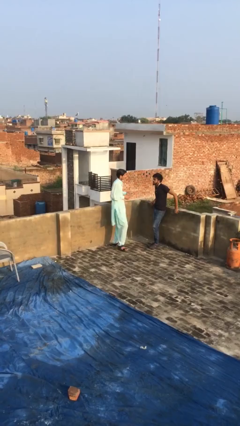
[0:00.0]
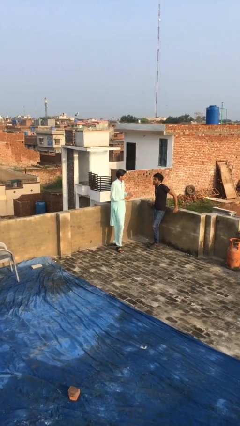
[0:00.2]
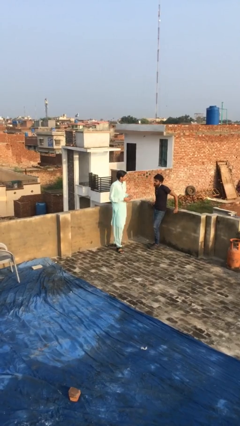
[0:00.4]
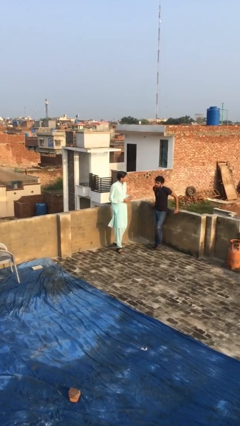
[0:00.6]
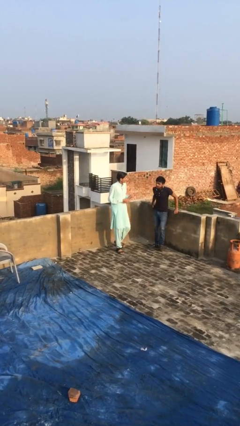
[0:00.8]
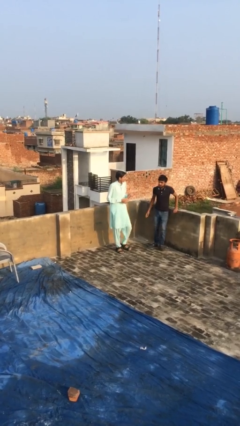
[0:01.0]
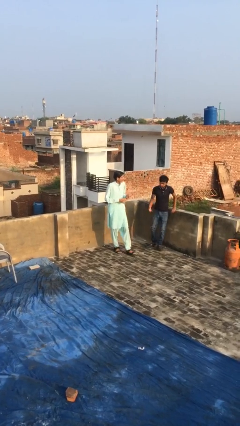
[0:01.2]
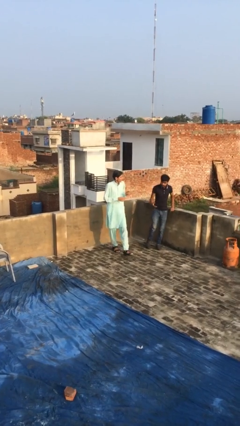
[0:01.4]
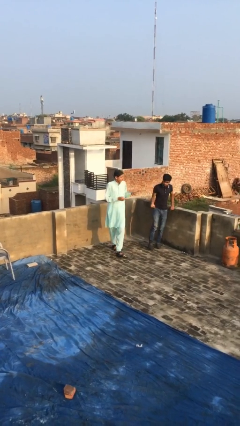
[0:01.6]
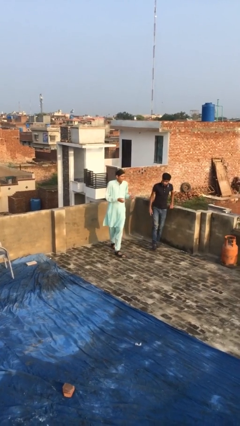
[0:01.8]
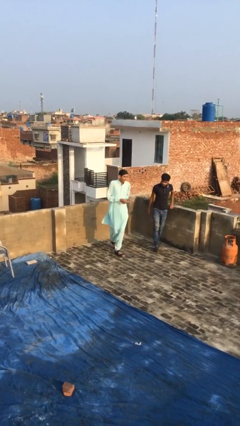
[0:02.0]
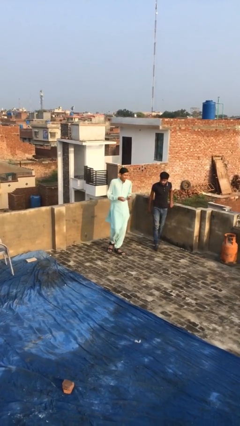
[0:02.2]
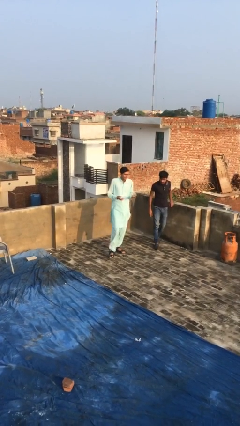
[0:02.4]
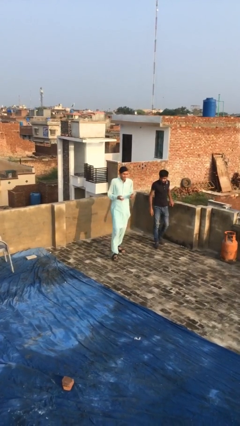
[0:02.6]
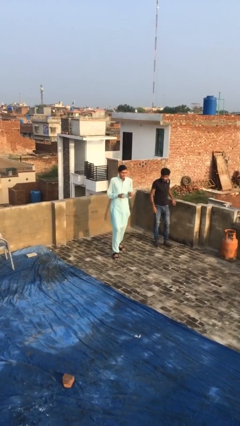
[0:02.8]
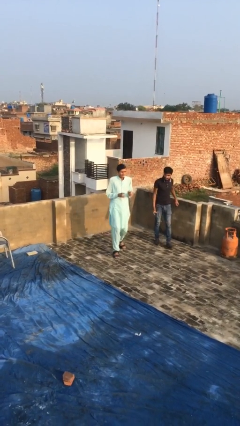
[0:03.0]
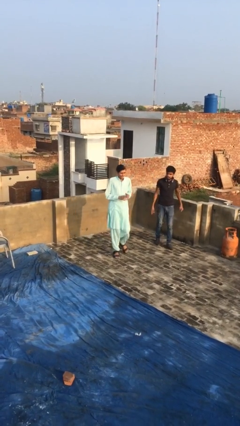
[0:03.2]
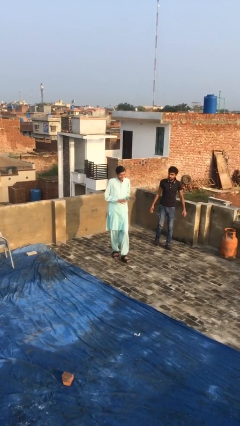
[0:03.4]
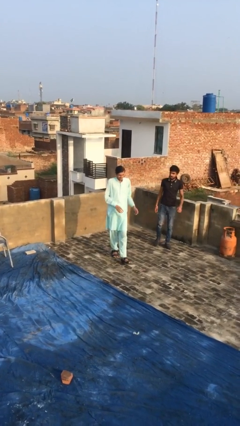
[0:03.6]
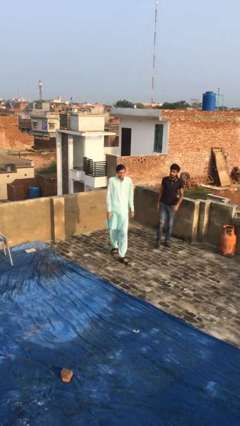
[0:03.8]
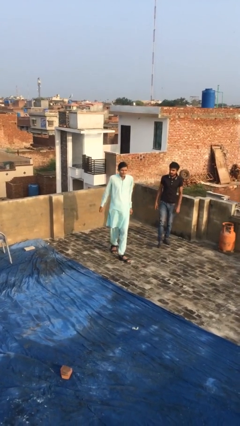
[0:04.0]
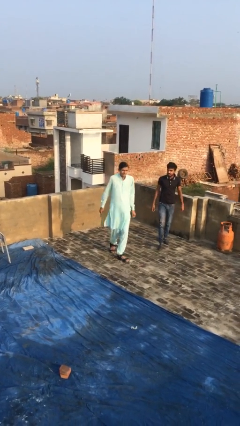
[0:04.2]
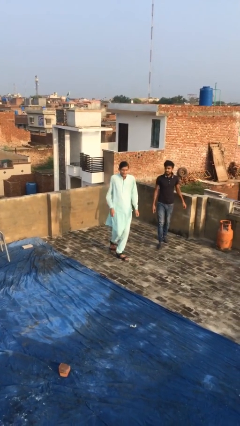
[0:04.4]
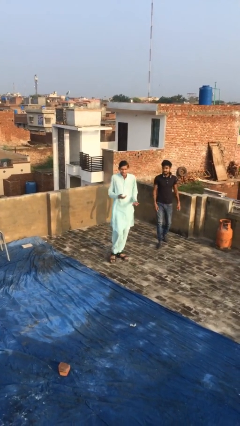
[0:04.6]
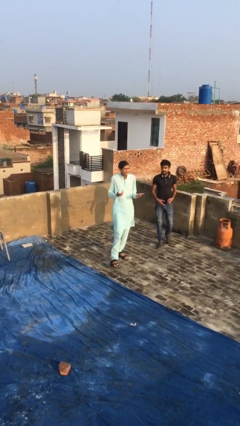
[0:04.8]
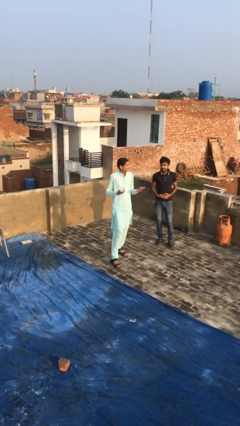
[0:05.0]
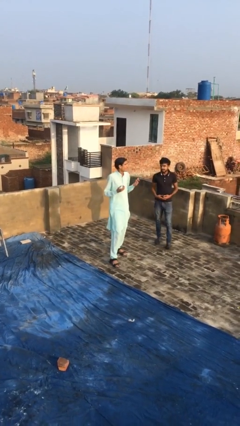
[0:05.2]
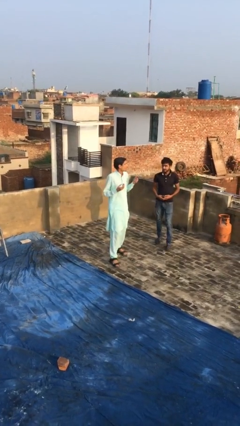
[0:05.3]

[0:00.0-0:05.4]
person talks to person

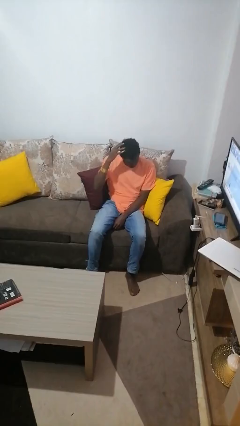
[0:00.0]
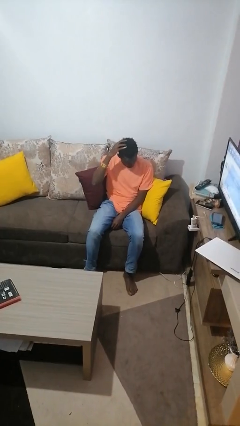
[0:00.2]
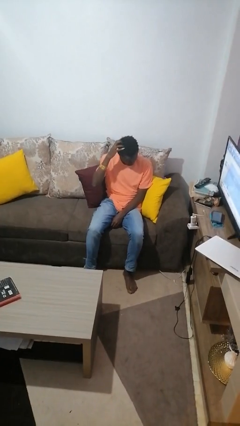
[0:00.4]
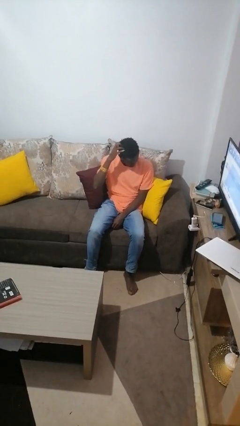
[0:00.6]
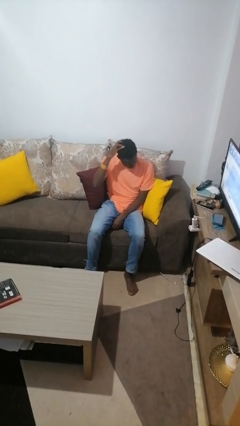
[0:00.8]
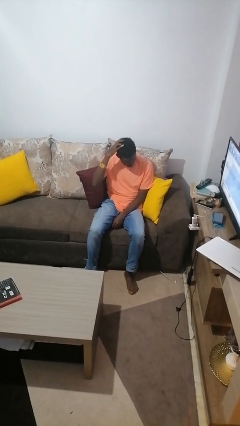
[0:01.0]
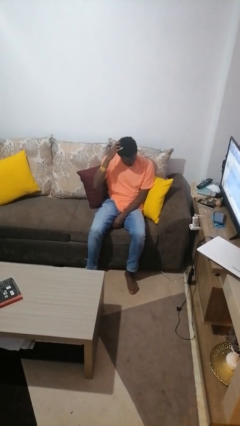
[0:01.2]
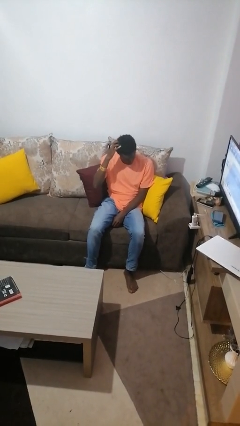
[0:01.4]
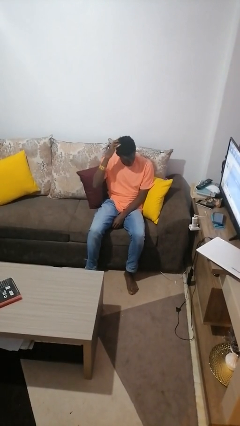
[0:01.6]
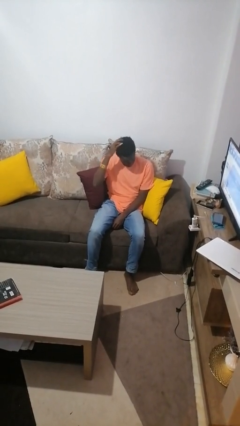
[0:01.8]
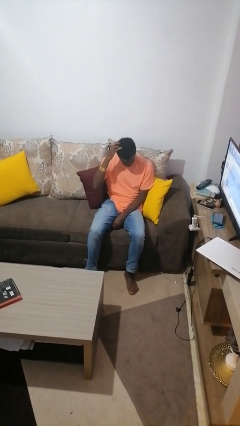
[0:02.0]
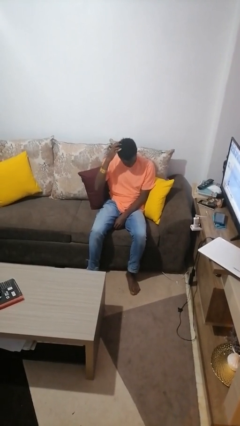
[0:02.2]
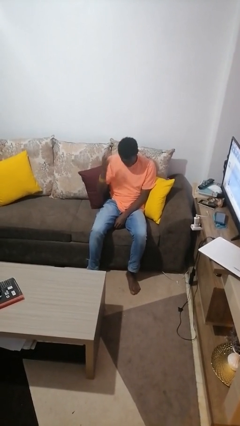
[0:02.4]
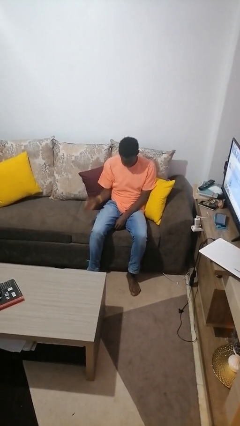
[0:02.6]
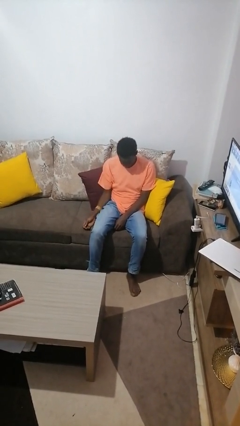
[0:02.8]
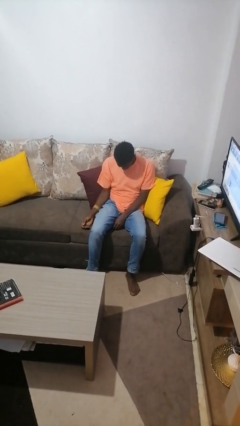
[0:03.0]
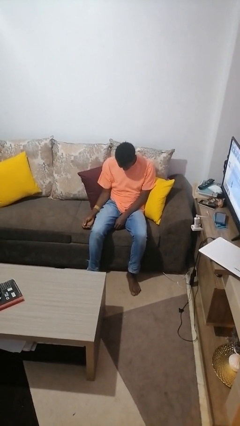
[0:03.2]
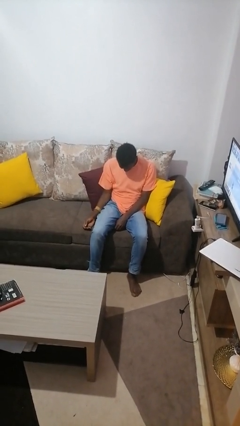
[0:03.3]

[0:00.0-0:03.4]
person strokes hair

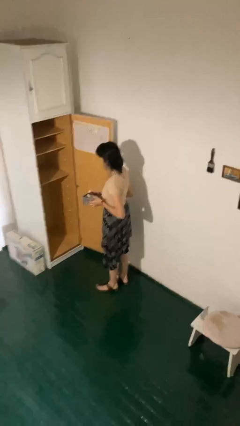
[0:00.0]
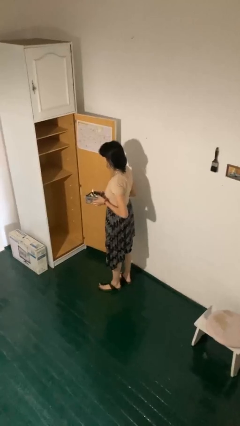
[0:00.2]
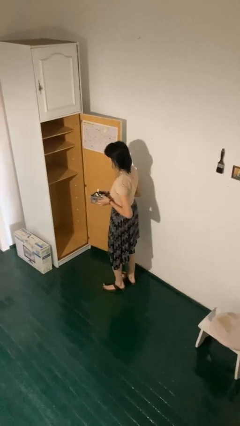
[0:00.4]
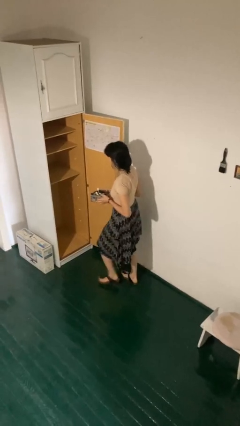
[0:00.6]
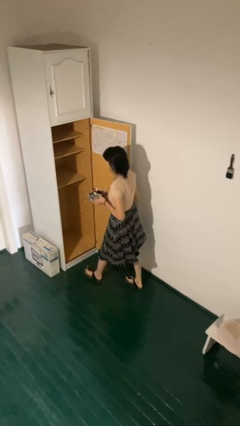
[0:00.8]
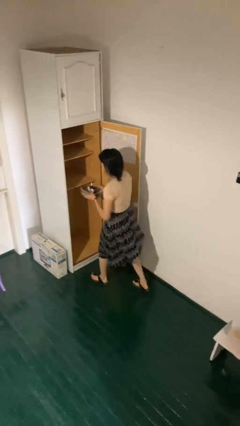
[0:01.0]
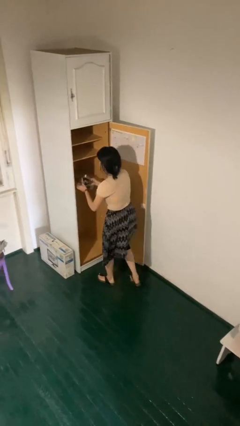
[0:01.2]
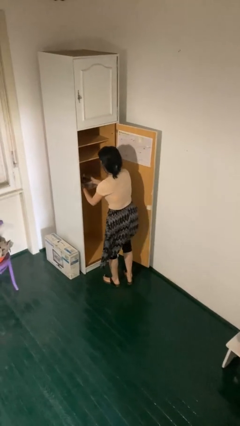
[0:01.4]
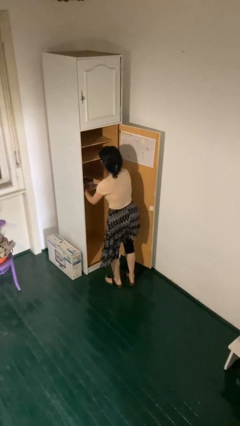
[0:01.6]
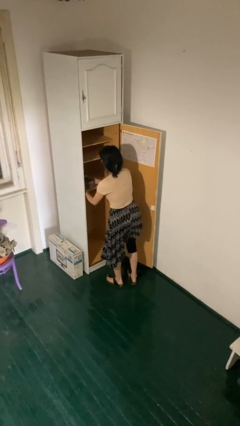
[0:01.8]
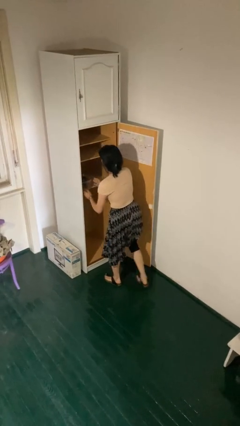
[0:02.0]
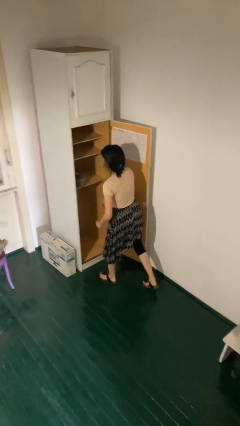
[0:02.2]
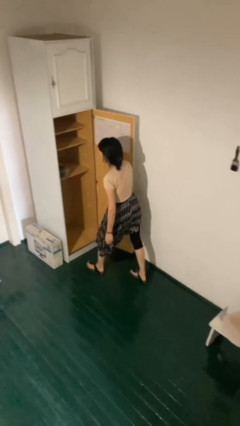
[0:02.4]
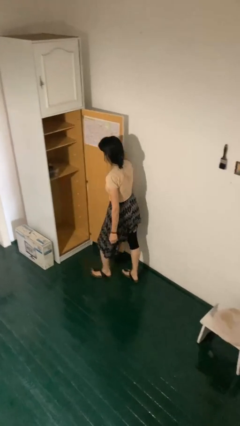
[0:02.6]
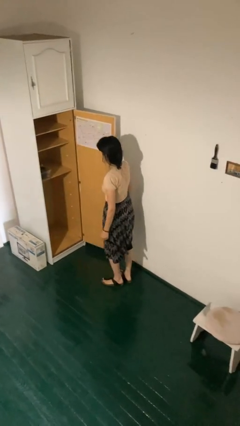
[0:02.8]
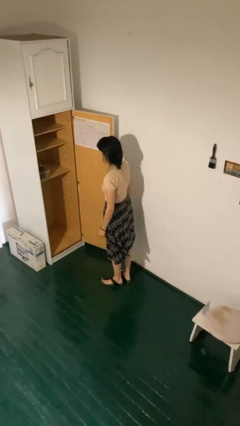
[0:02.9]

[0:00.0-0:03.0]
person puts down object into cabinet

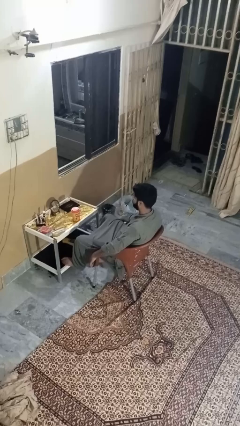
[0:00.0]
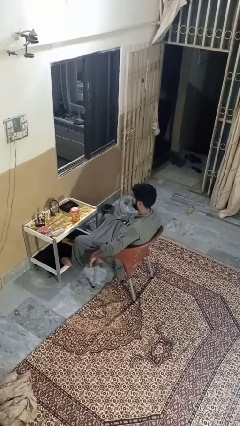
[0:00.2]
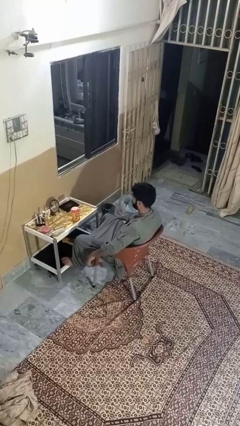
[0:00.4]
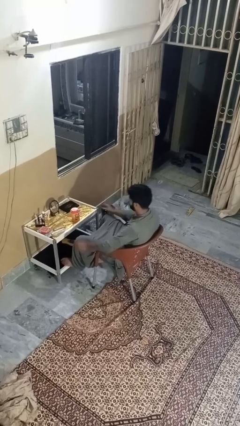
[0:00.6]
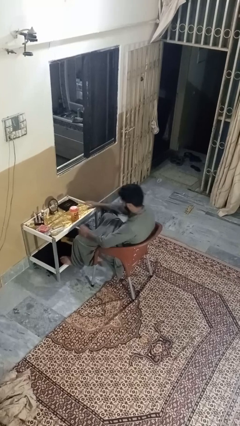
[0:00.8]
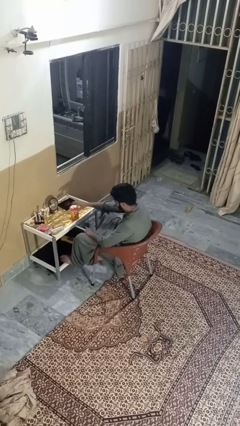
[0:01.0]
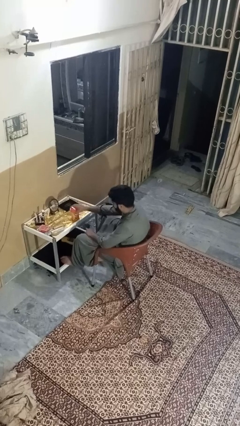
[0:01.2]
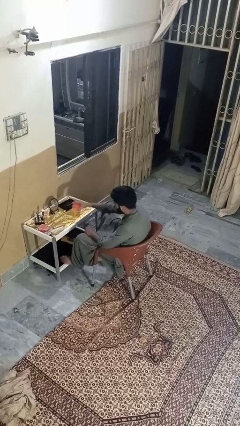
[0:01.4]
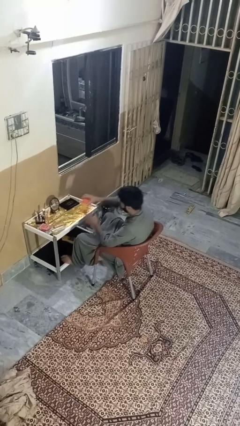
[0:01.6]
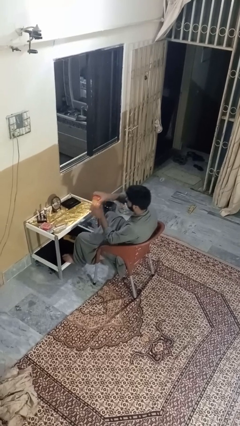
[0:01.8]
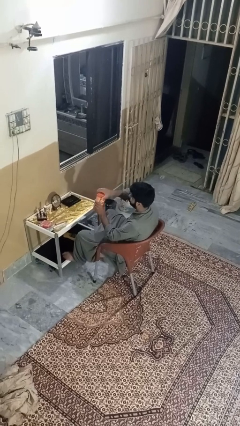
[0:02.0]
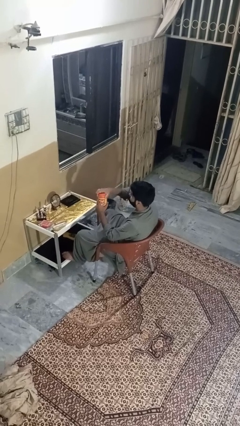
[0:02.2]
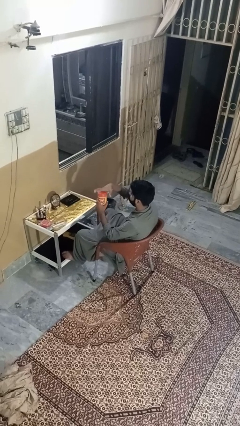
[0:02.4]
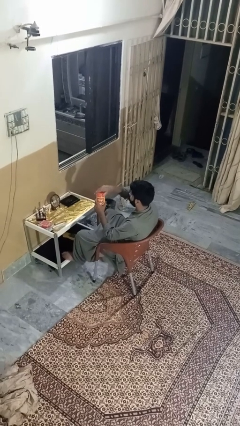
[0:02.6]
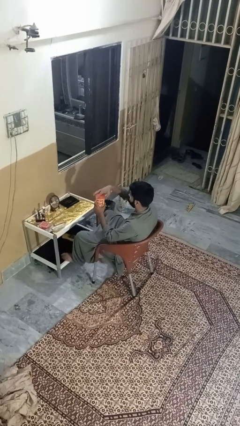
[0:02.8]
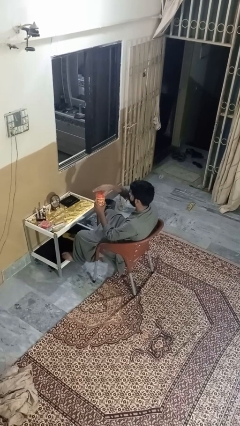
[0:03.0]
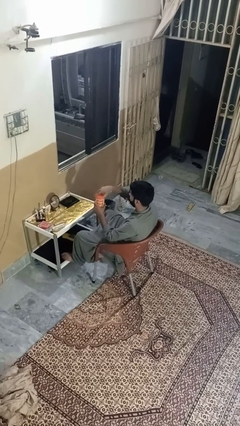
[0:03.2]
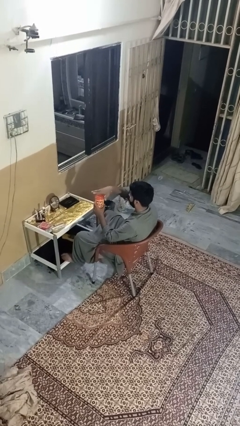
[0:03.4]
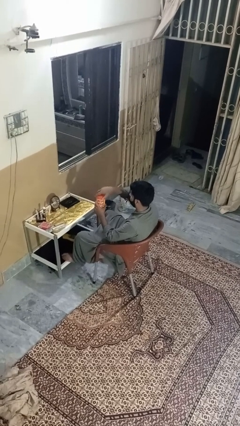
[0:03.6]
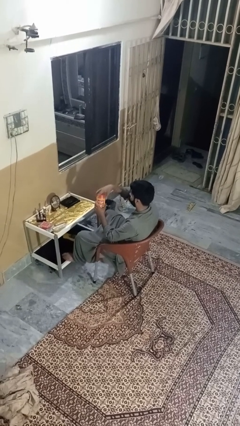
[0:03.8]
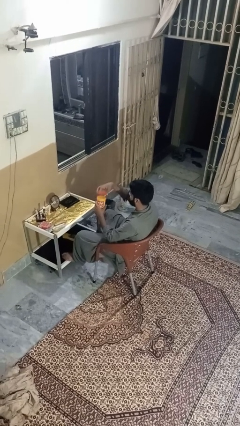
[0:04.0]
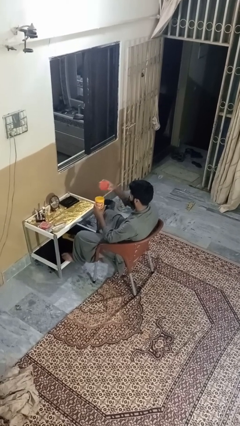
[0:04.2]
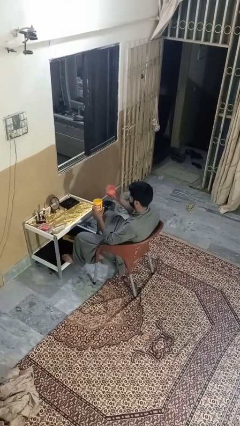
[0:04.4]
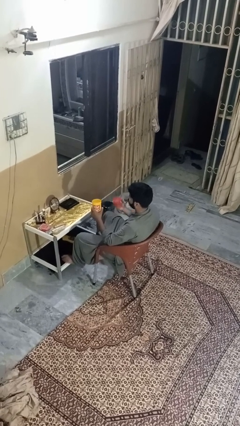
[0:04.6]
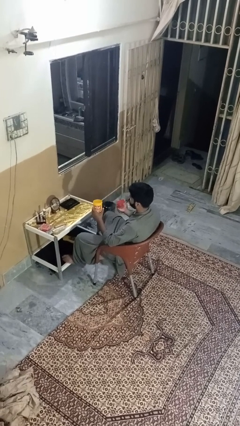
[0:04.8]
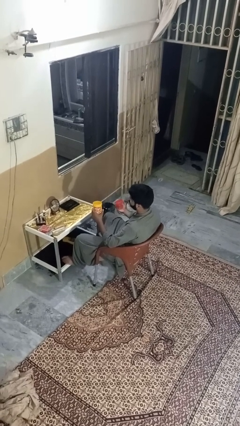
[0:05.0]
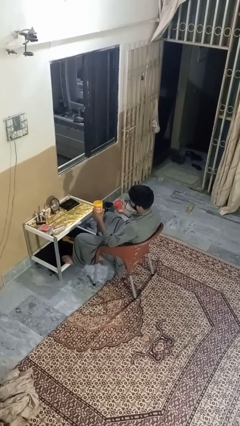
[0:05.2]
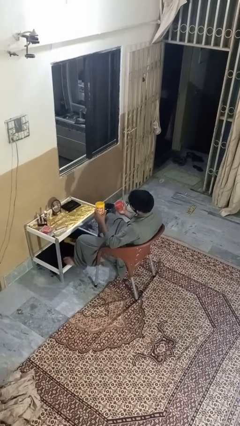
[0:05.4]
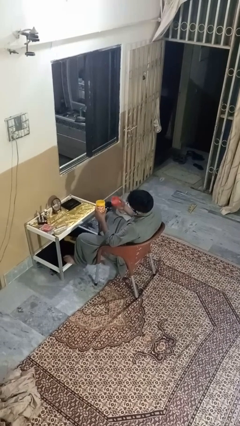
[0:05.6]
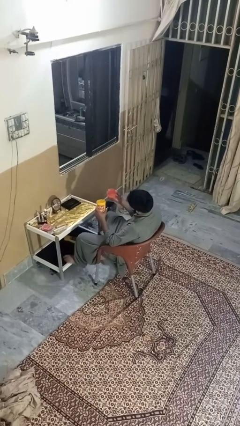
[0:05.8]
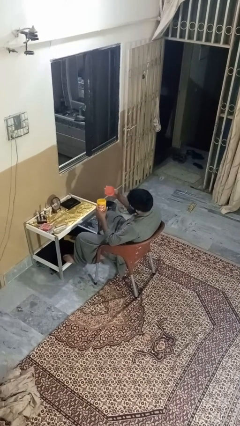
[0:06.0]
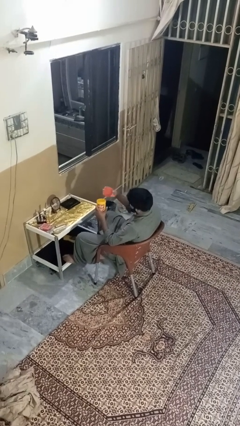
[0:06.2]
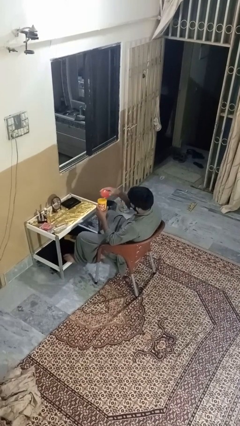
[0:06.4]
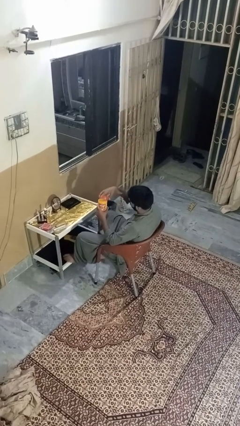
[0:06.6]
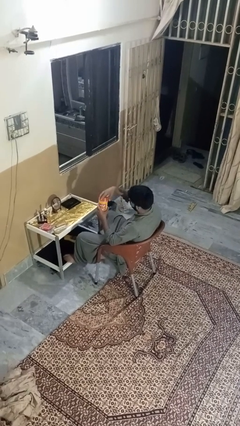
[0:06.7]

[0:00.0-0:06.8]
person opens jar
